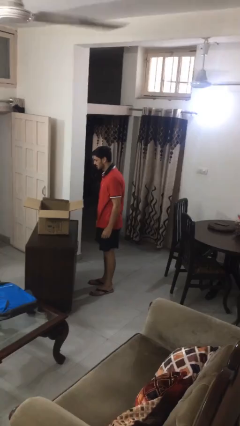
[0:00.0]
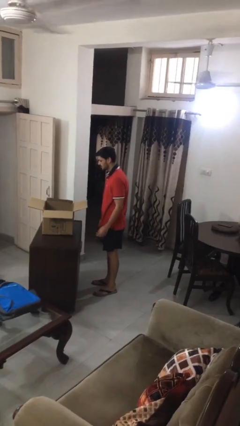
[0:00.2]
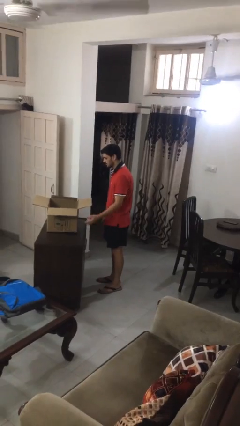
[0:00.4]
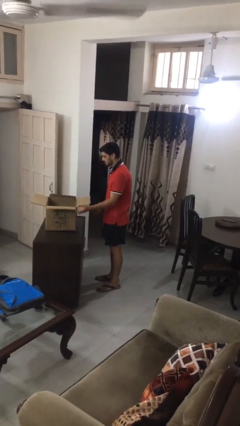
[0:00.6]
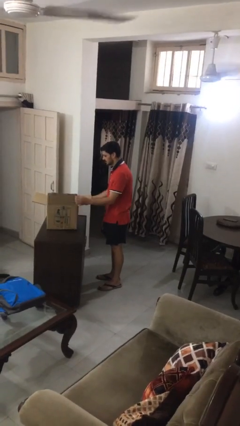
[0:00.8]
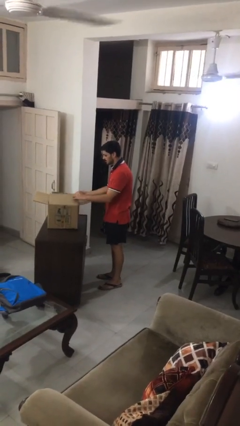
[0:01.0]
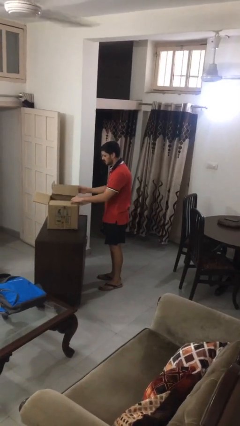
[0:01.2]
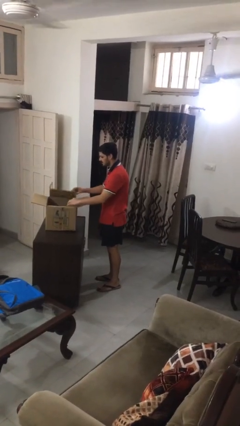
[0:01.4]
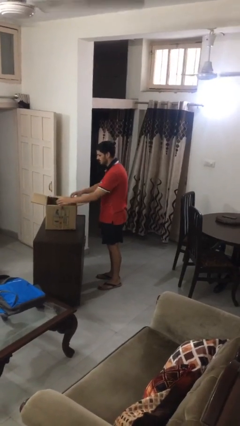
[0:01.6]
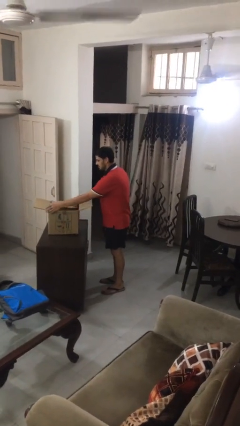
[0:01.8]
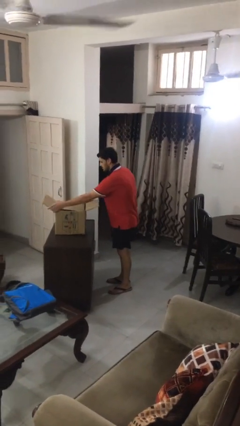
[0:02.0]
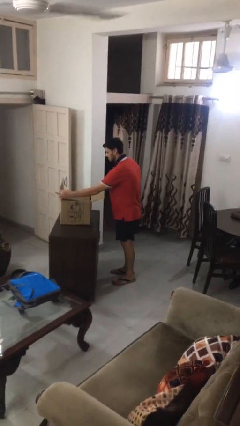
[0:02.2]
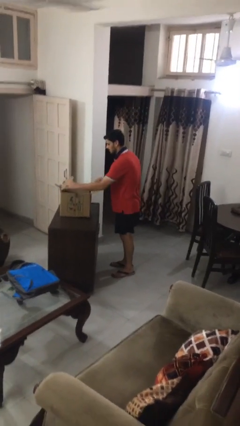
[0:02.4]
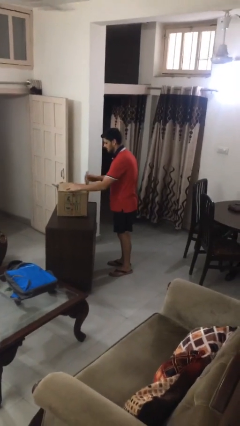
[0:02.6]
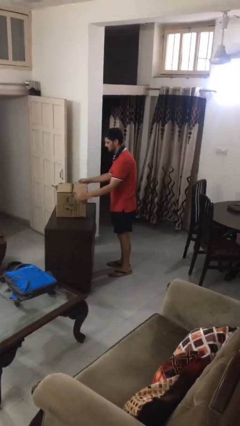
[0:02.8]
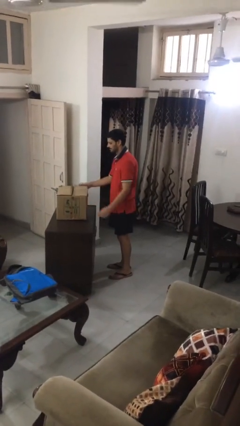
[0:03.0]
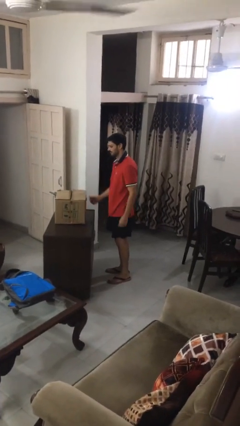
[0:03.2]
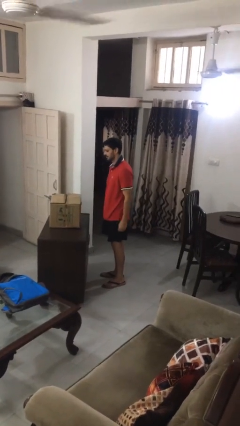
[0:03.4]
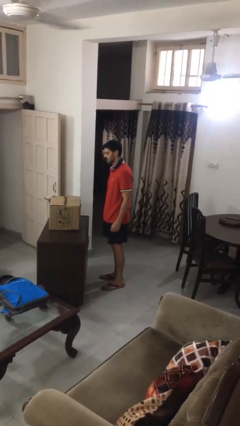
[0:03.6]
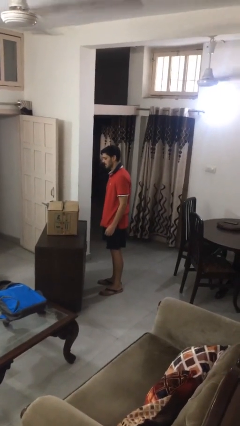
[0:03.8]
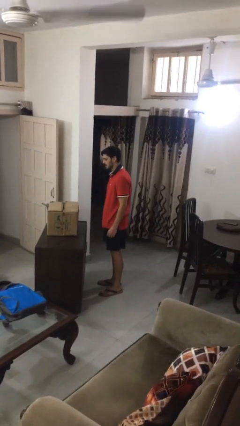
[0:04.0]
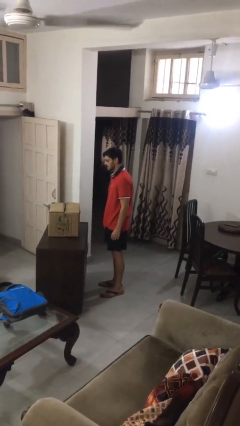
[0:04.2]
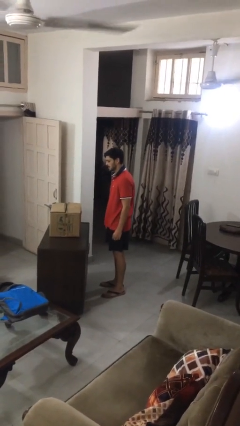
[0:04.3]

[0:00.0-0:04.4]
person closes box

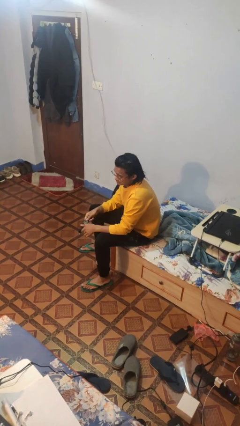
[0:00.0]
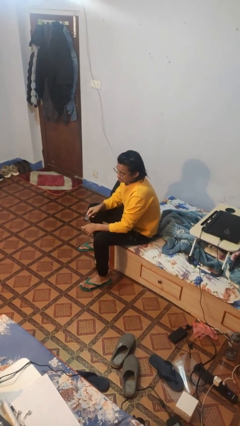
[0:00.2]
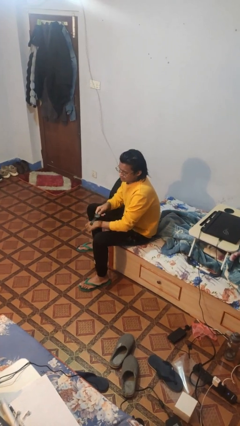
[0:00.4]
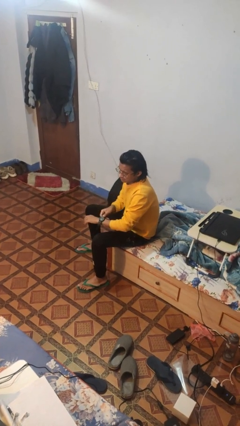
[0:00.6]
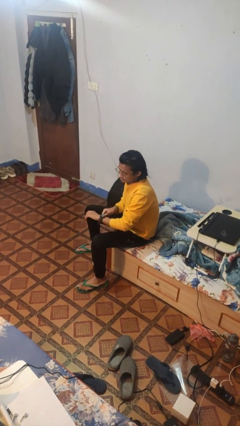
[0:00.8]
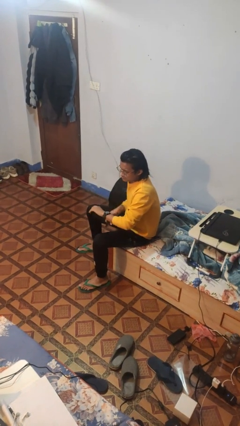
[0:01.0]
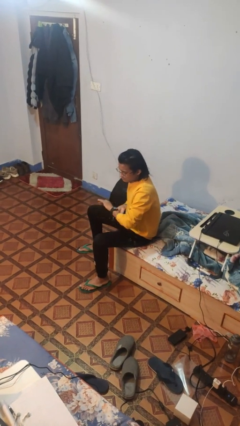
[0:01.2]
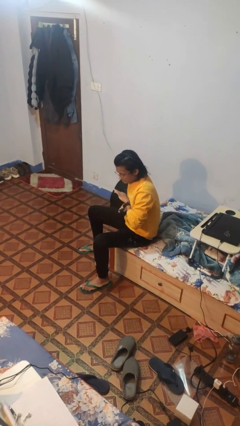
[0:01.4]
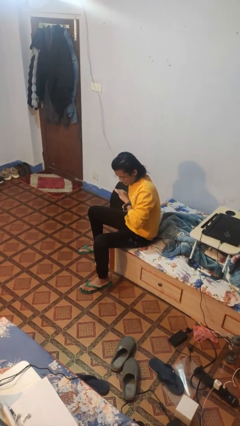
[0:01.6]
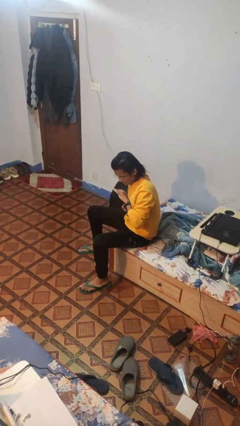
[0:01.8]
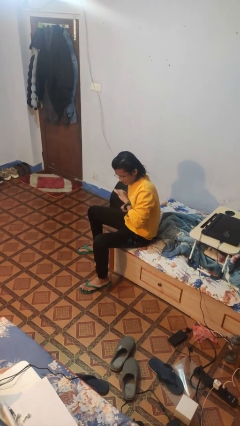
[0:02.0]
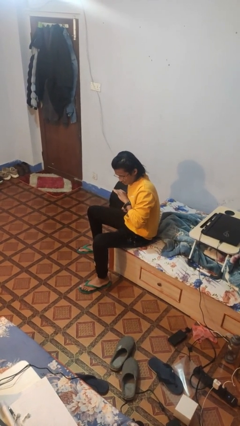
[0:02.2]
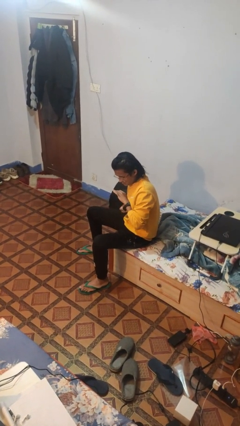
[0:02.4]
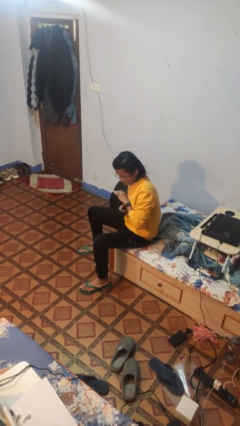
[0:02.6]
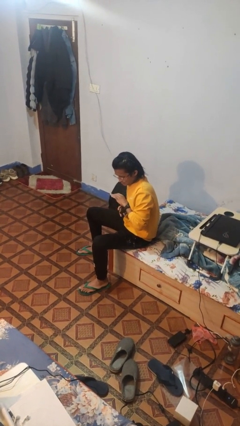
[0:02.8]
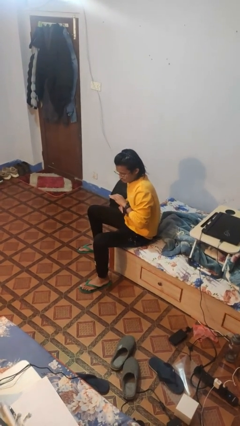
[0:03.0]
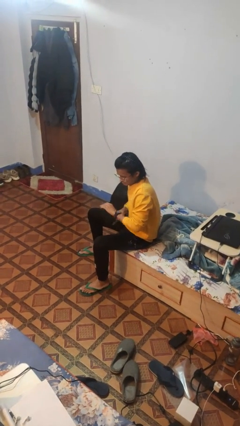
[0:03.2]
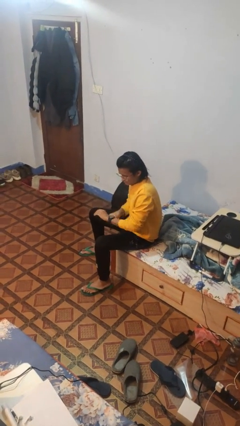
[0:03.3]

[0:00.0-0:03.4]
person puts on wristwatch

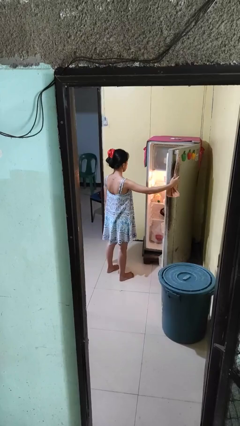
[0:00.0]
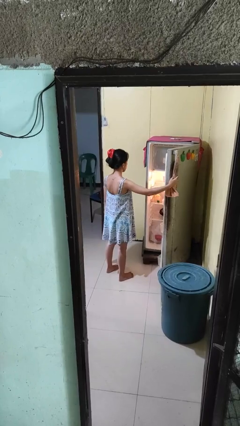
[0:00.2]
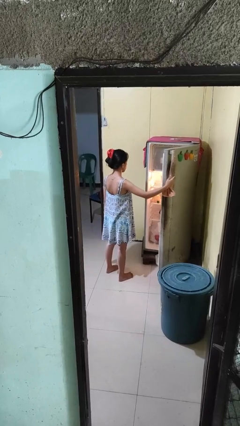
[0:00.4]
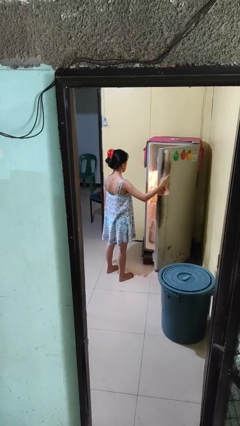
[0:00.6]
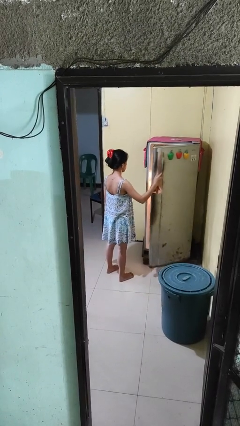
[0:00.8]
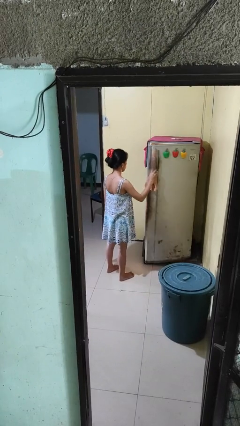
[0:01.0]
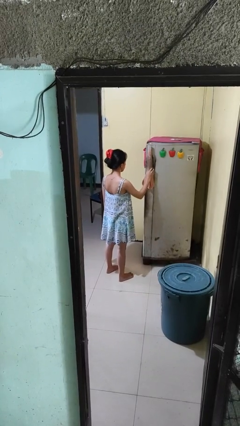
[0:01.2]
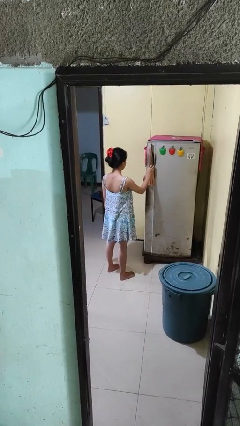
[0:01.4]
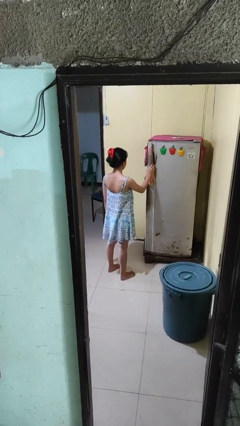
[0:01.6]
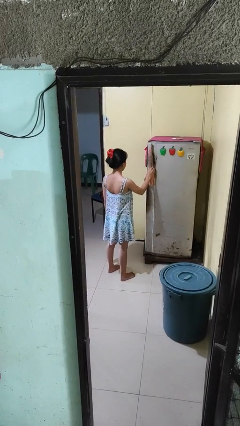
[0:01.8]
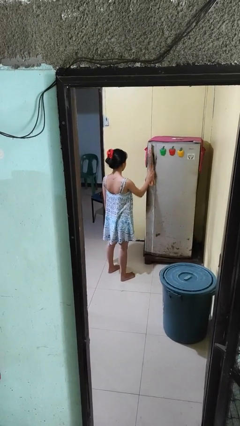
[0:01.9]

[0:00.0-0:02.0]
person closes refrigerator

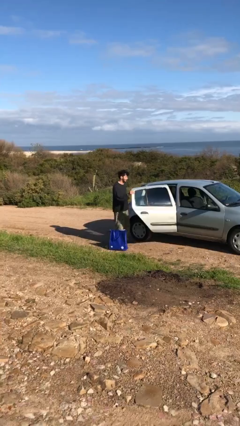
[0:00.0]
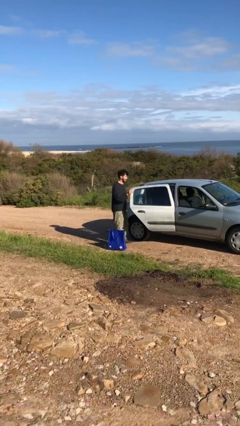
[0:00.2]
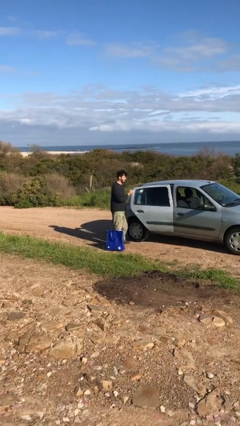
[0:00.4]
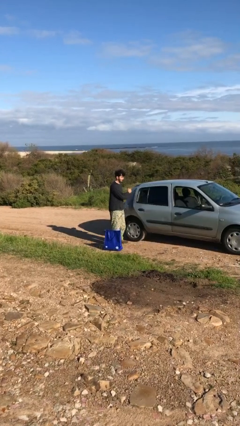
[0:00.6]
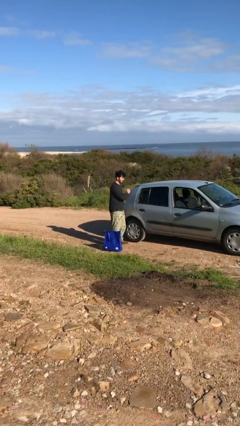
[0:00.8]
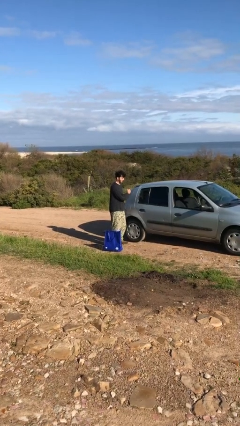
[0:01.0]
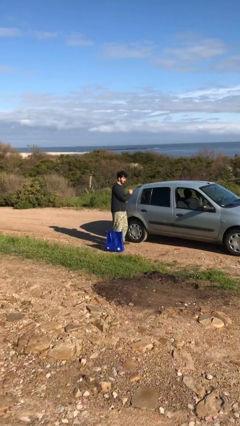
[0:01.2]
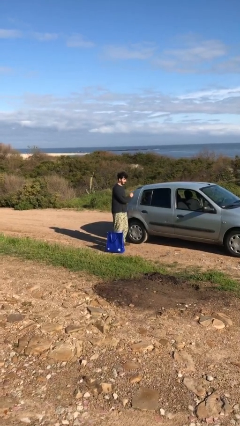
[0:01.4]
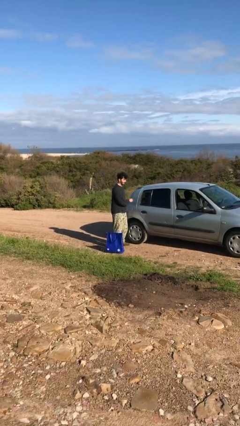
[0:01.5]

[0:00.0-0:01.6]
person closes car door

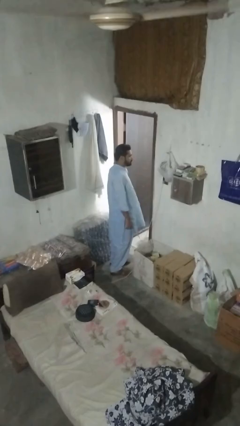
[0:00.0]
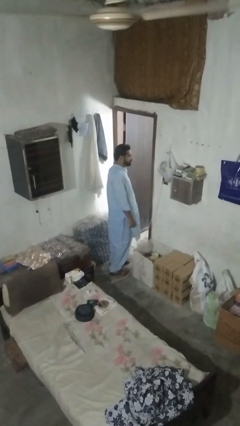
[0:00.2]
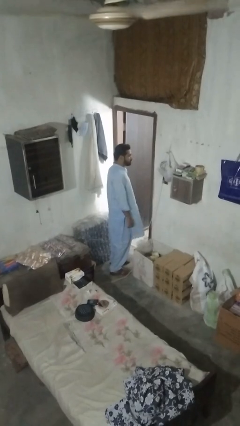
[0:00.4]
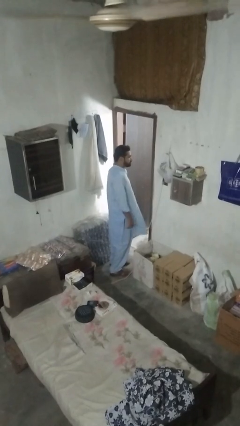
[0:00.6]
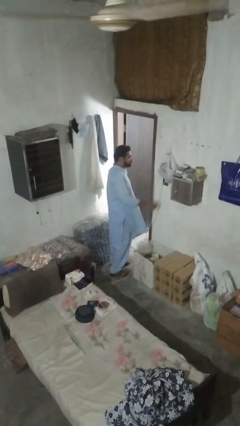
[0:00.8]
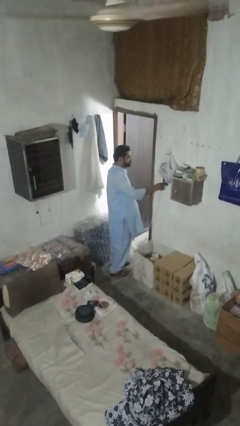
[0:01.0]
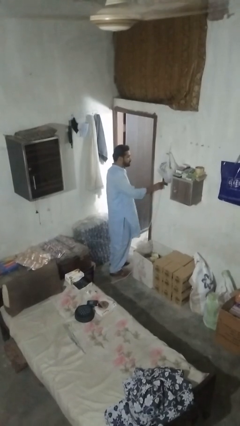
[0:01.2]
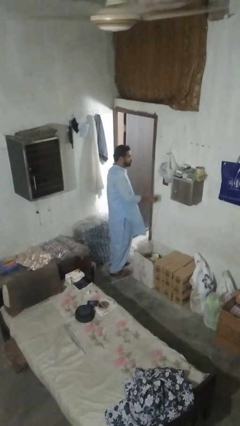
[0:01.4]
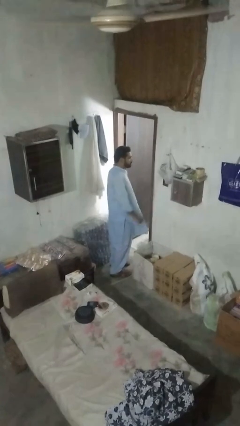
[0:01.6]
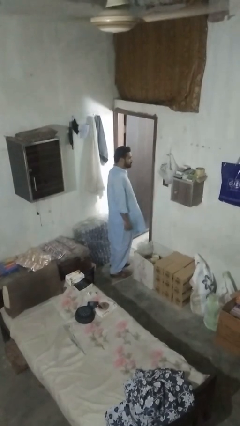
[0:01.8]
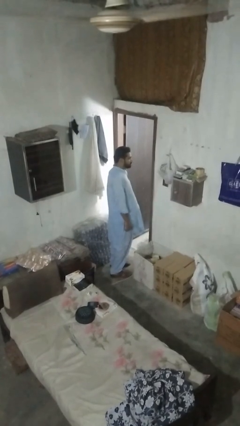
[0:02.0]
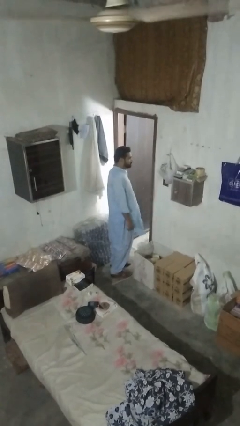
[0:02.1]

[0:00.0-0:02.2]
person unplugs from electrical socket

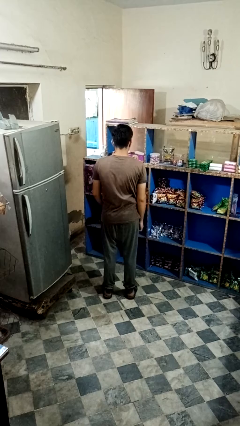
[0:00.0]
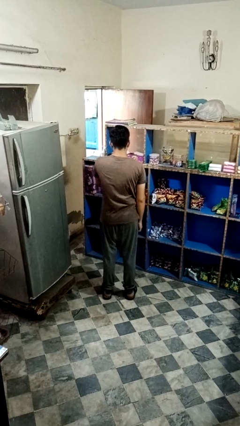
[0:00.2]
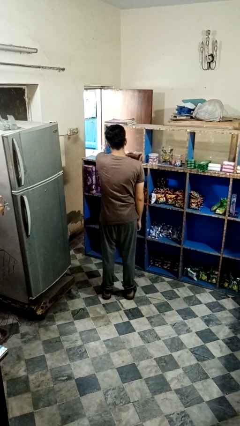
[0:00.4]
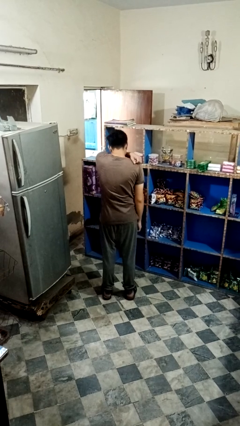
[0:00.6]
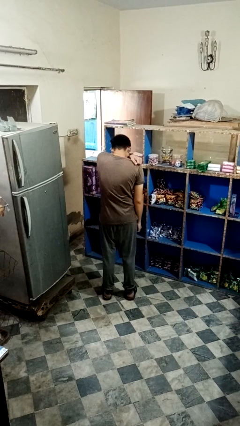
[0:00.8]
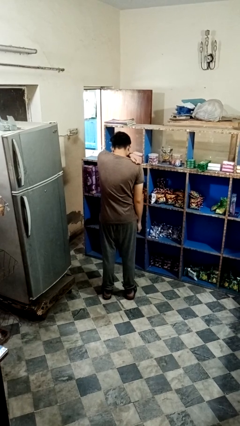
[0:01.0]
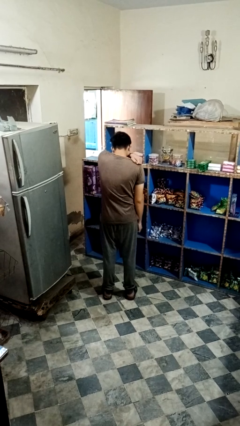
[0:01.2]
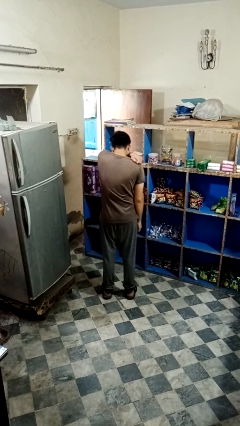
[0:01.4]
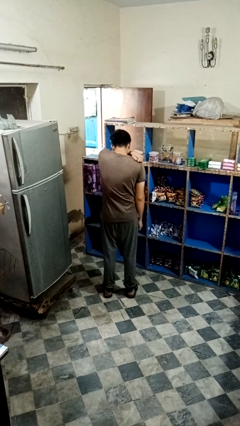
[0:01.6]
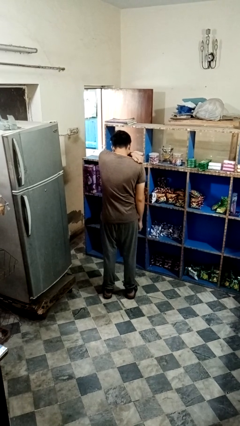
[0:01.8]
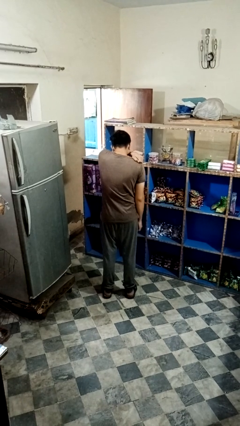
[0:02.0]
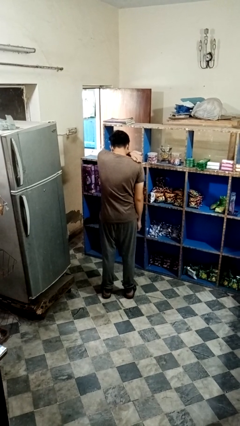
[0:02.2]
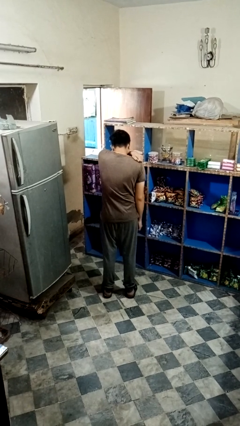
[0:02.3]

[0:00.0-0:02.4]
person sneezes into arm

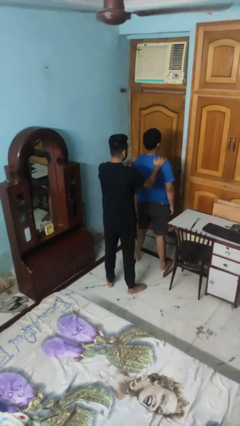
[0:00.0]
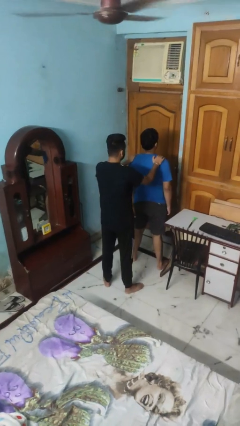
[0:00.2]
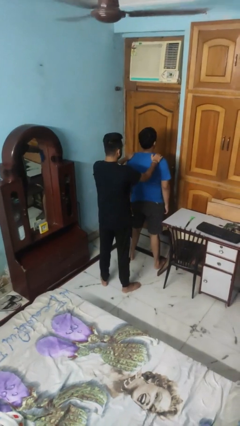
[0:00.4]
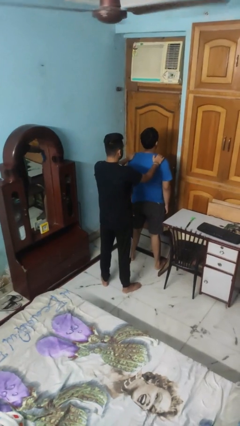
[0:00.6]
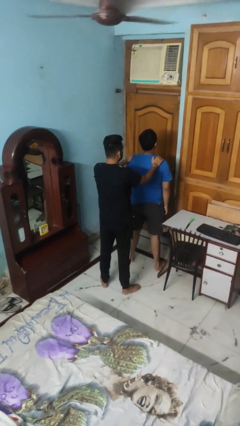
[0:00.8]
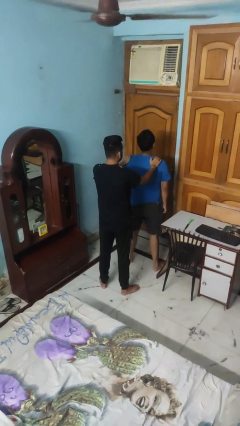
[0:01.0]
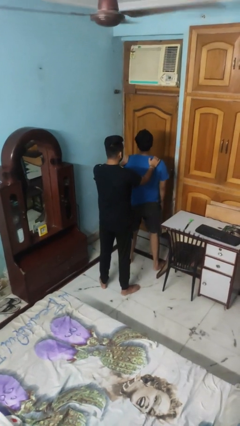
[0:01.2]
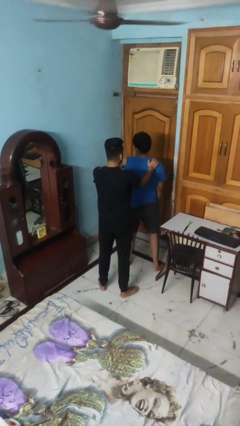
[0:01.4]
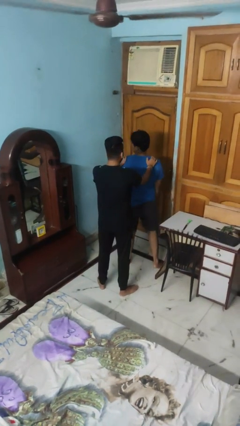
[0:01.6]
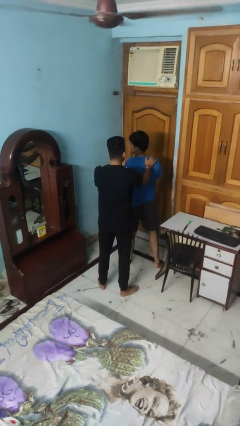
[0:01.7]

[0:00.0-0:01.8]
person grabs person by shoulder
